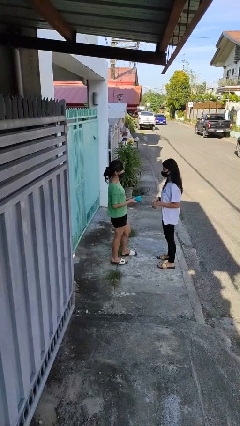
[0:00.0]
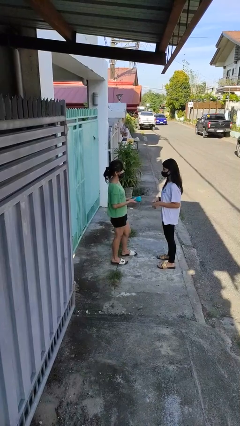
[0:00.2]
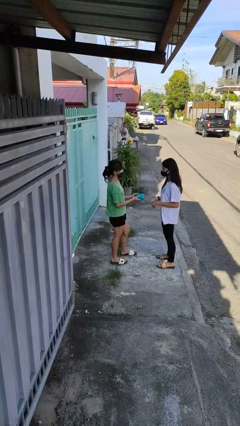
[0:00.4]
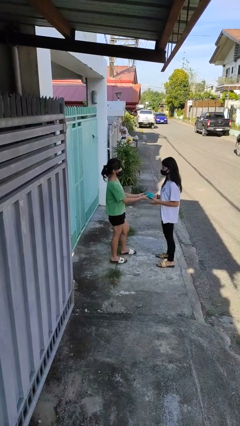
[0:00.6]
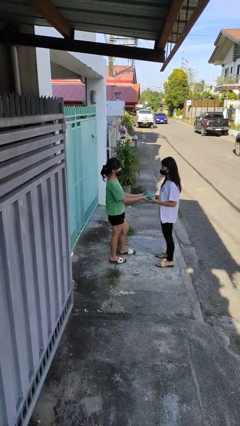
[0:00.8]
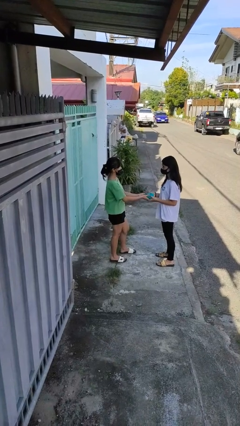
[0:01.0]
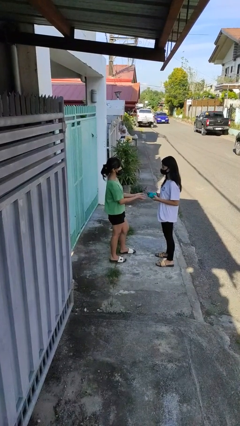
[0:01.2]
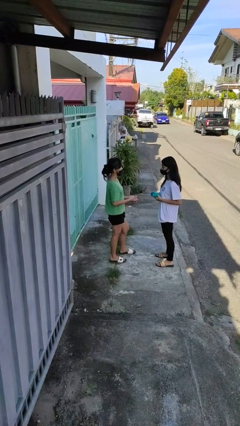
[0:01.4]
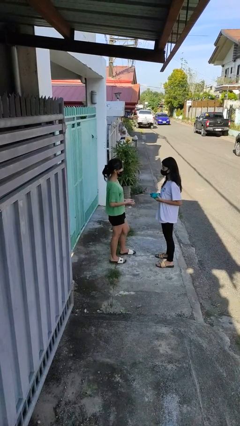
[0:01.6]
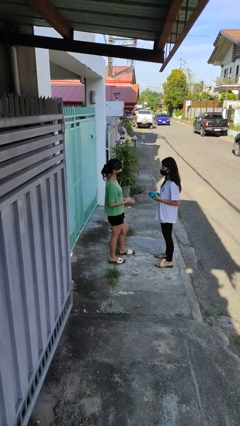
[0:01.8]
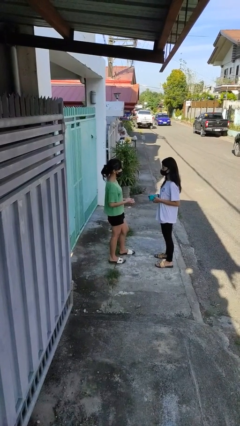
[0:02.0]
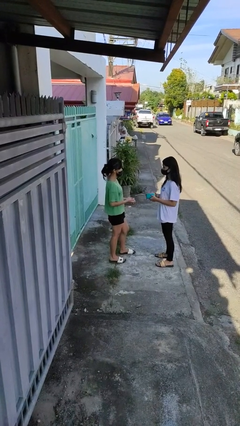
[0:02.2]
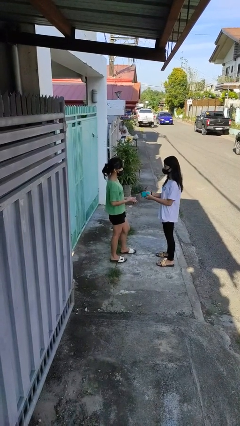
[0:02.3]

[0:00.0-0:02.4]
person transfers object to person

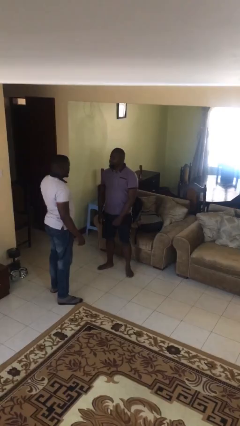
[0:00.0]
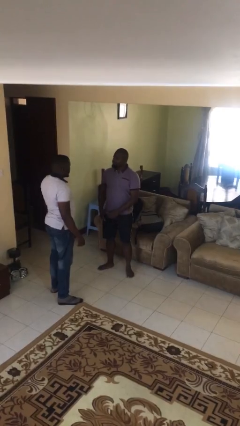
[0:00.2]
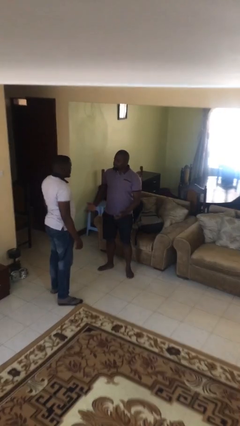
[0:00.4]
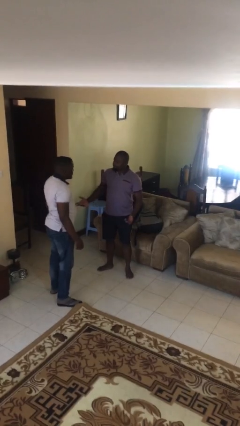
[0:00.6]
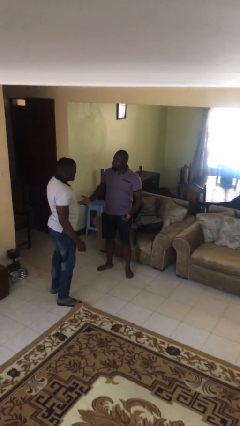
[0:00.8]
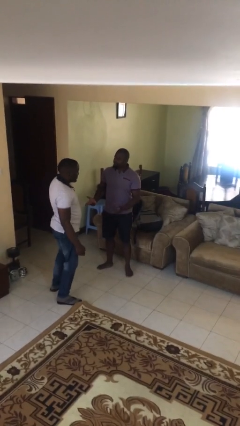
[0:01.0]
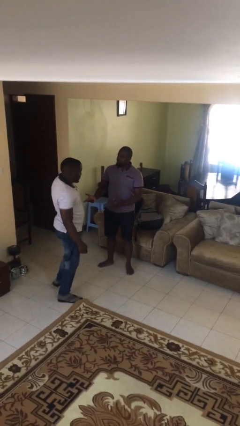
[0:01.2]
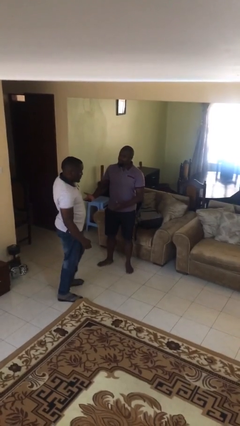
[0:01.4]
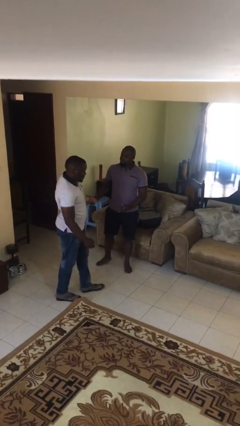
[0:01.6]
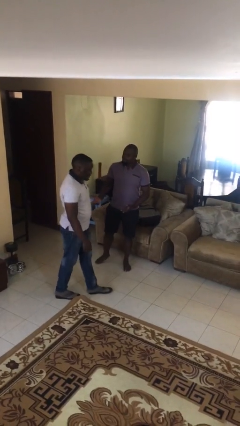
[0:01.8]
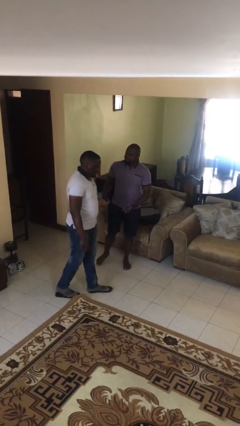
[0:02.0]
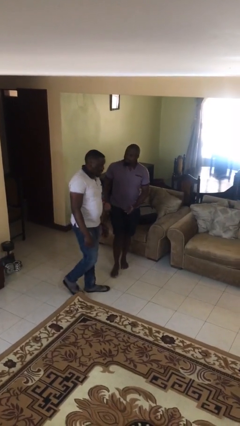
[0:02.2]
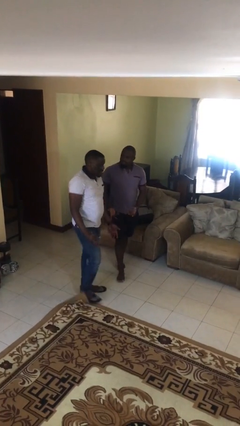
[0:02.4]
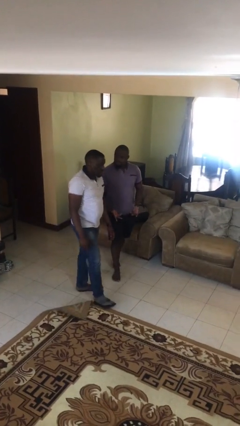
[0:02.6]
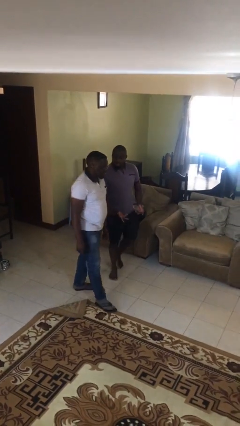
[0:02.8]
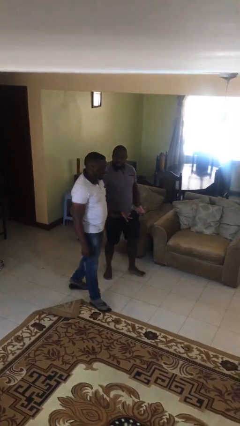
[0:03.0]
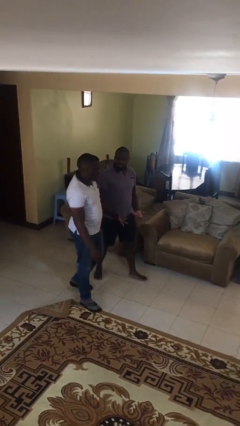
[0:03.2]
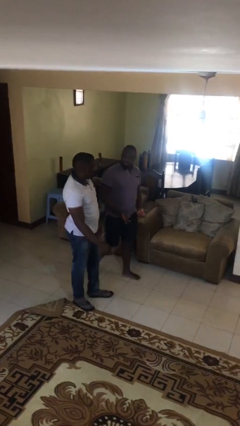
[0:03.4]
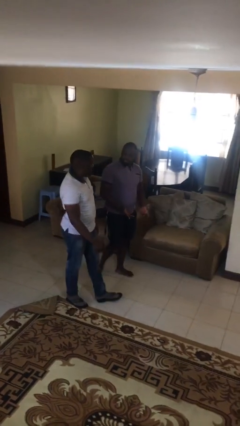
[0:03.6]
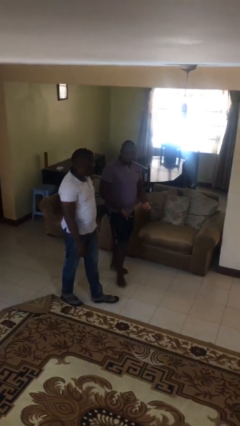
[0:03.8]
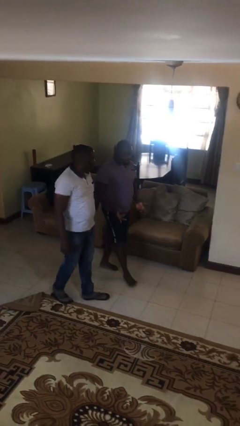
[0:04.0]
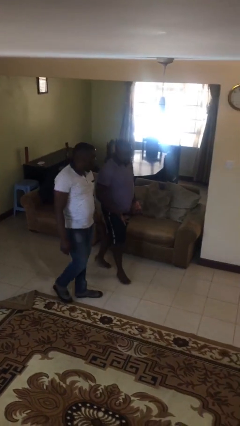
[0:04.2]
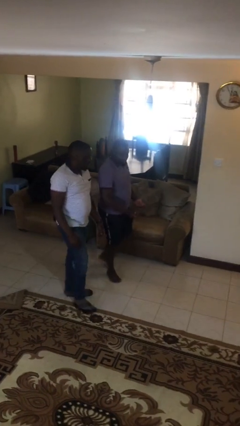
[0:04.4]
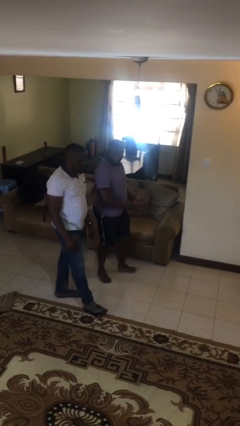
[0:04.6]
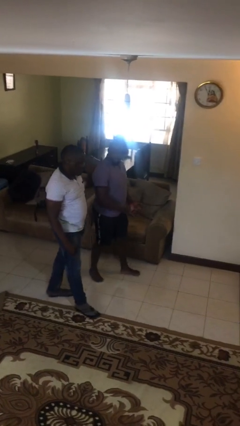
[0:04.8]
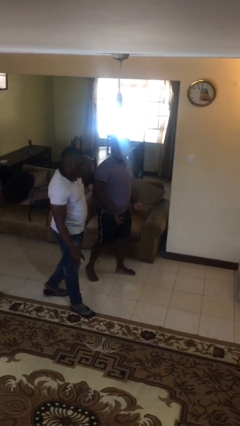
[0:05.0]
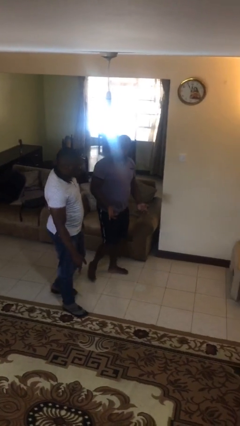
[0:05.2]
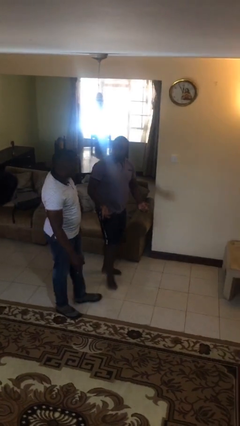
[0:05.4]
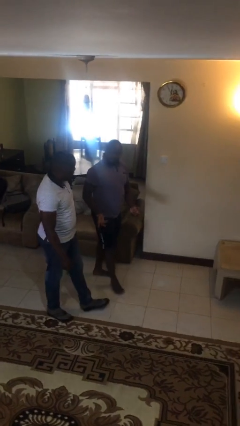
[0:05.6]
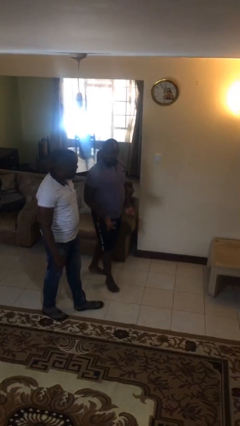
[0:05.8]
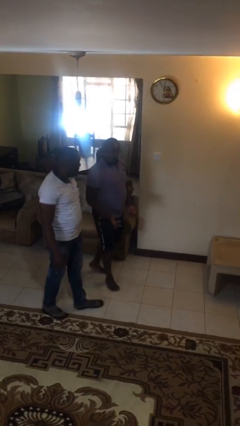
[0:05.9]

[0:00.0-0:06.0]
person talks to person

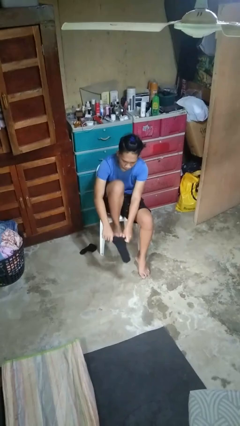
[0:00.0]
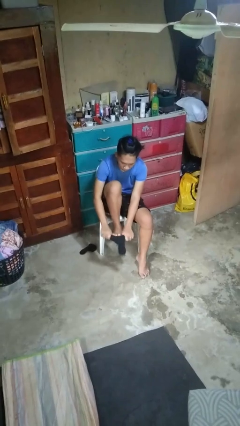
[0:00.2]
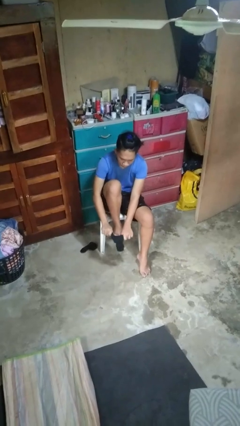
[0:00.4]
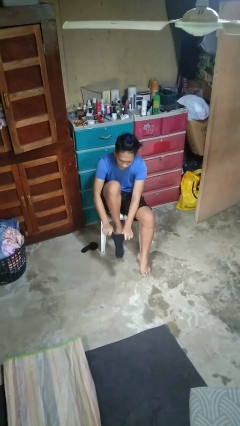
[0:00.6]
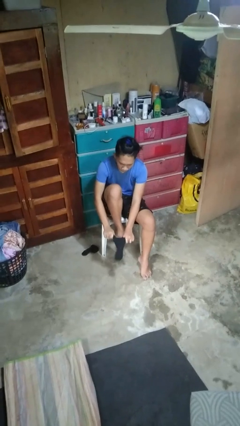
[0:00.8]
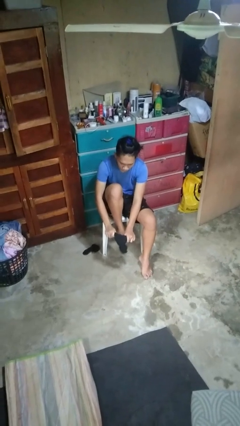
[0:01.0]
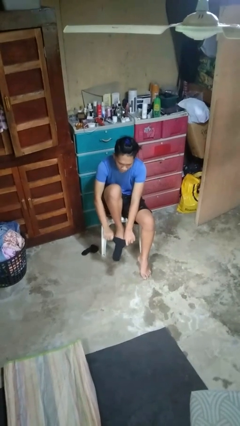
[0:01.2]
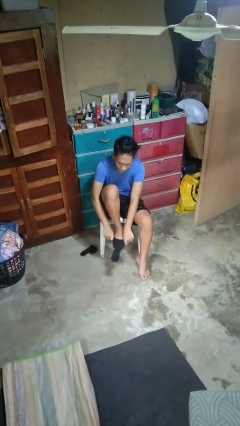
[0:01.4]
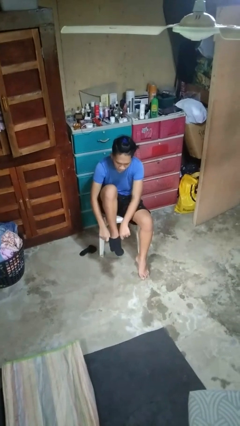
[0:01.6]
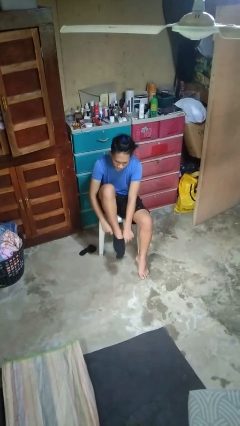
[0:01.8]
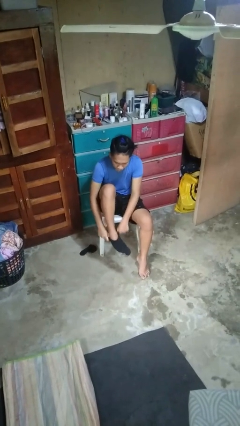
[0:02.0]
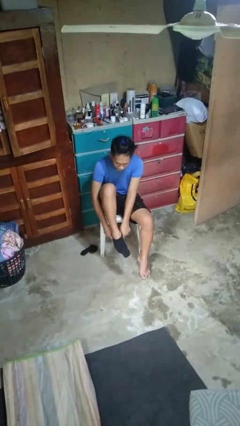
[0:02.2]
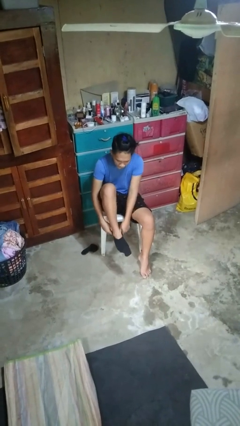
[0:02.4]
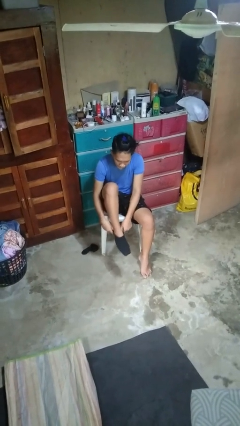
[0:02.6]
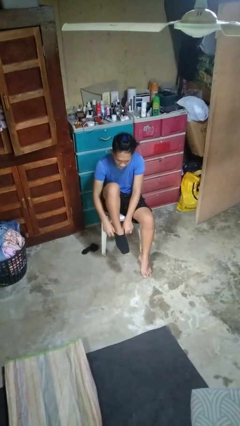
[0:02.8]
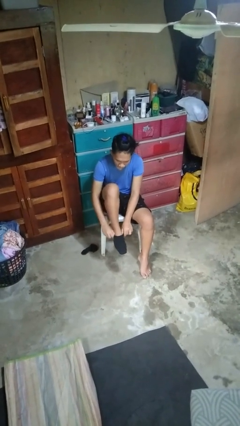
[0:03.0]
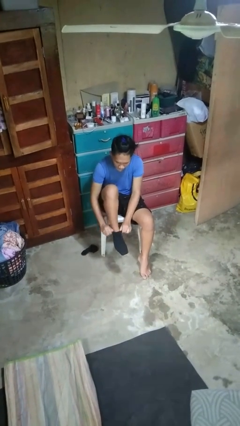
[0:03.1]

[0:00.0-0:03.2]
person puts on socks

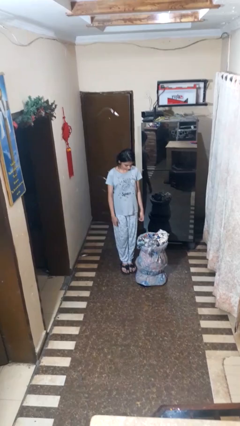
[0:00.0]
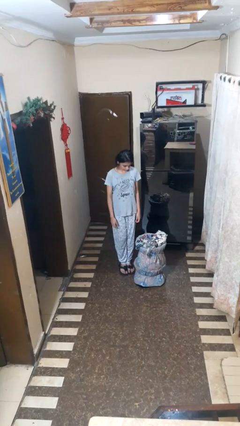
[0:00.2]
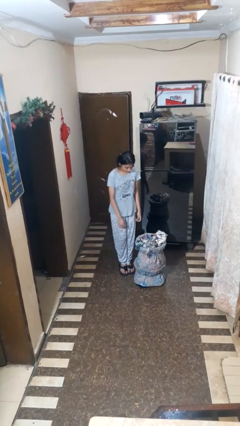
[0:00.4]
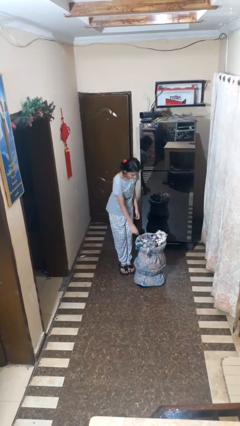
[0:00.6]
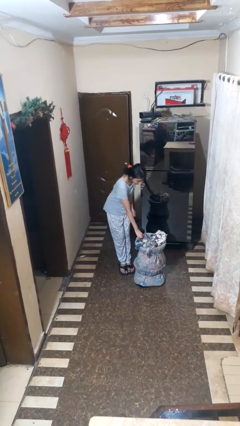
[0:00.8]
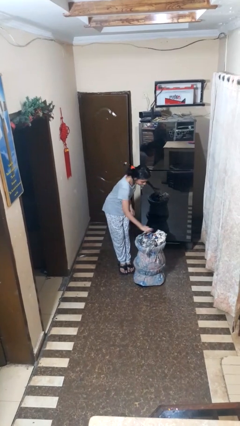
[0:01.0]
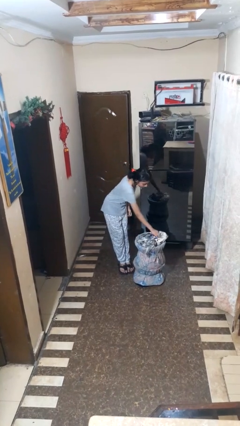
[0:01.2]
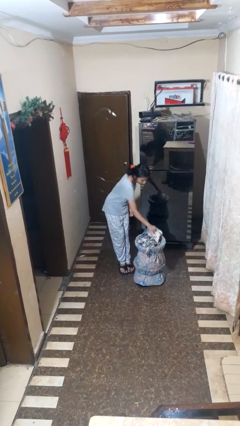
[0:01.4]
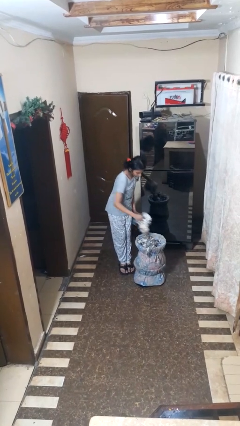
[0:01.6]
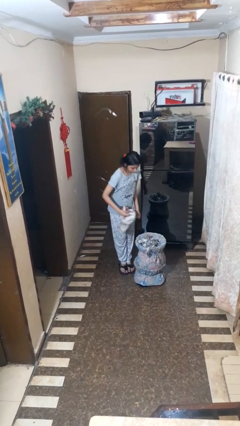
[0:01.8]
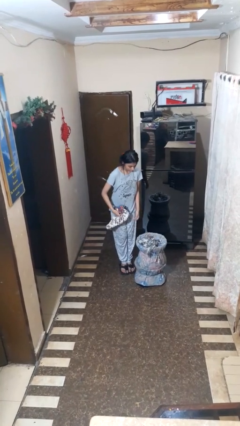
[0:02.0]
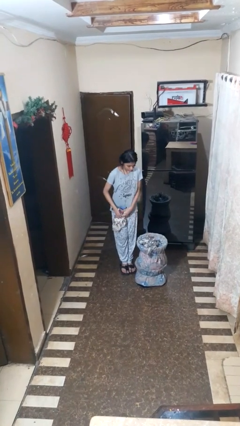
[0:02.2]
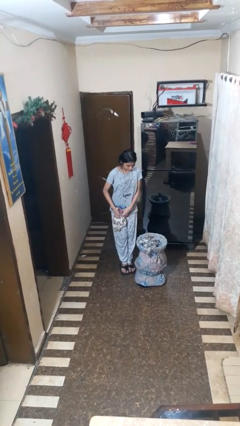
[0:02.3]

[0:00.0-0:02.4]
person puts object into basket

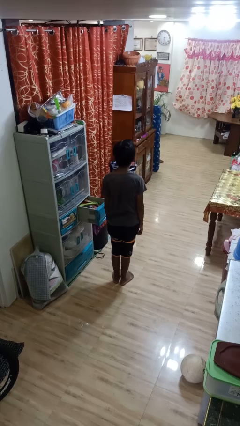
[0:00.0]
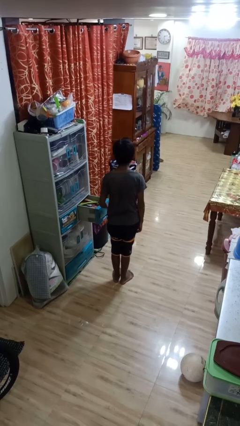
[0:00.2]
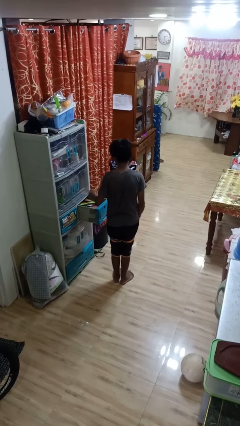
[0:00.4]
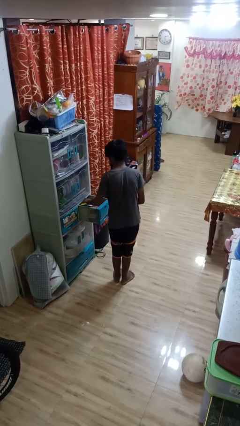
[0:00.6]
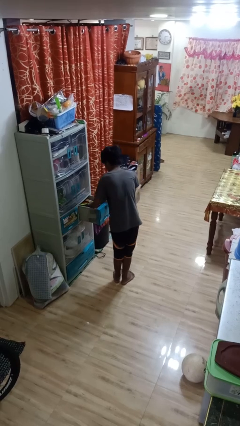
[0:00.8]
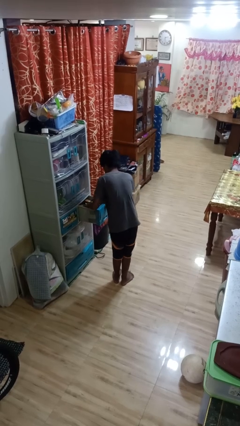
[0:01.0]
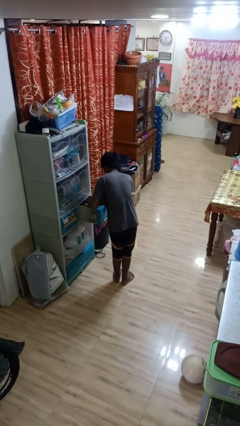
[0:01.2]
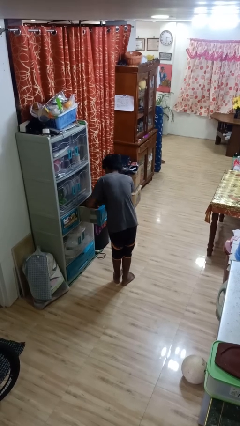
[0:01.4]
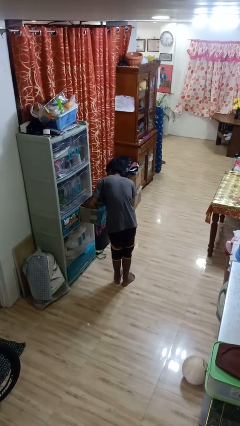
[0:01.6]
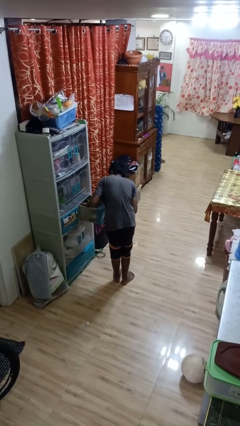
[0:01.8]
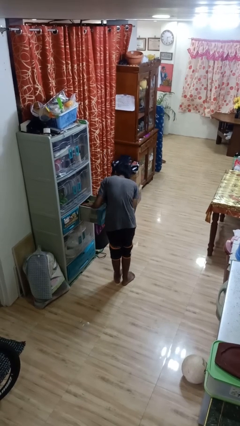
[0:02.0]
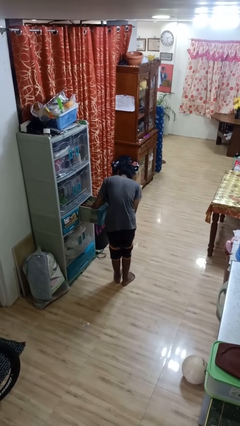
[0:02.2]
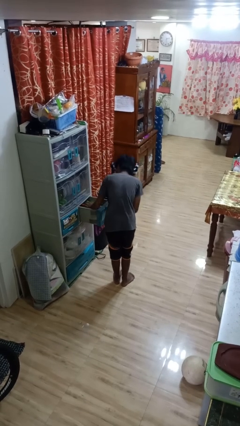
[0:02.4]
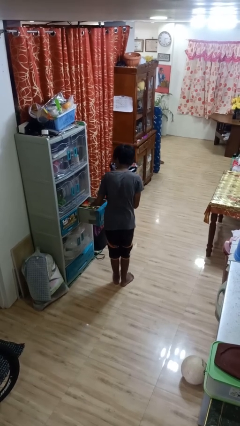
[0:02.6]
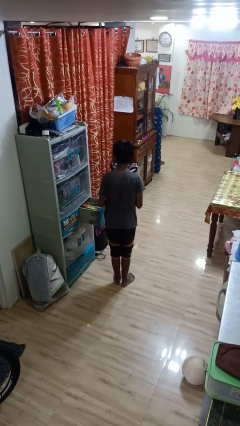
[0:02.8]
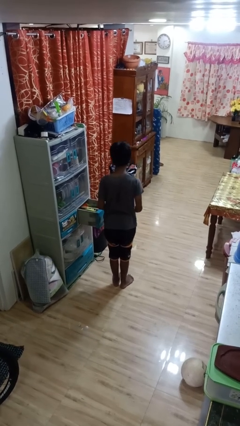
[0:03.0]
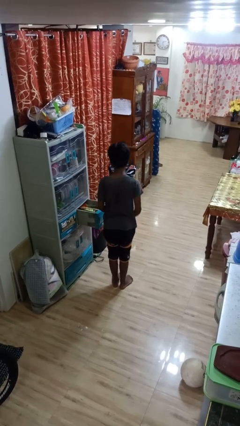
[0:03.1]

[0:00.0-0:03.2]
person searches in kitchen drawer
